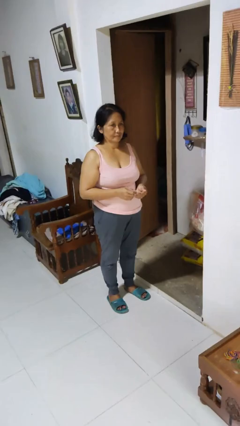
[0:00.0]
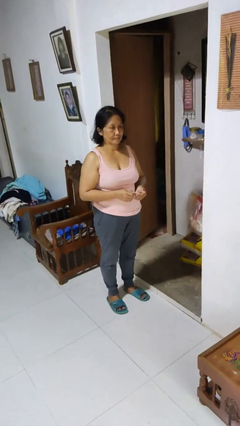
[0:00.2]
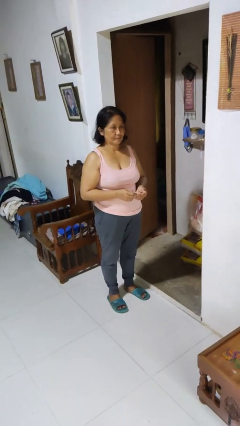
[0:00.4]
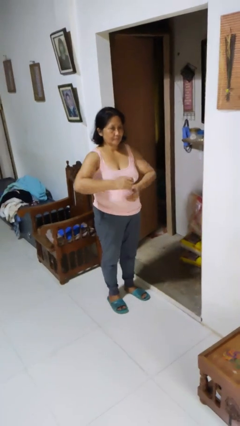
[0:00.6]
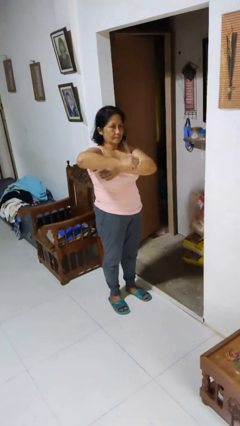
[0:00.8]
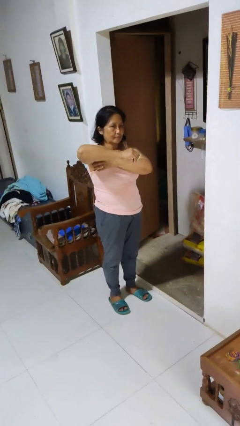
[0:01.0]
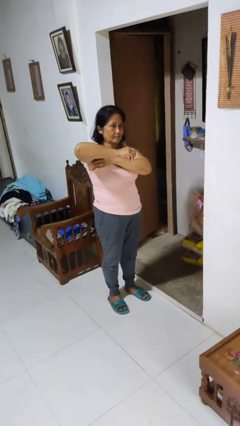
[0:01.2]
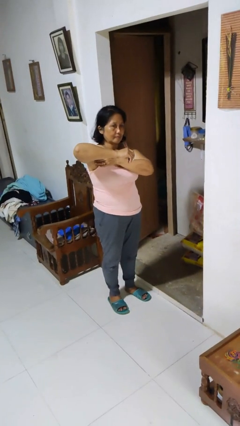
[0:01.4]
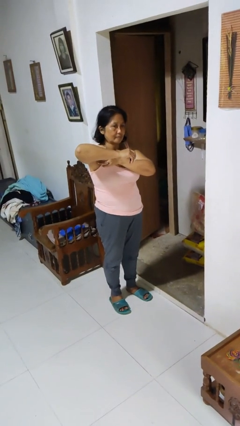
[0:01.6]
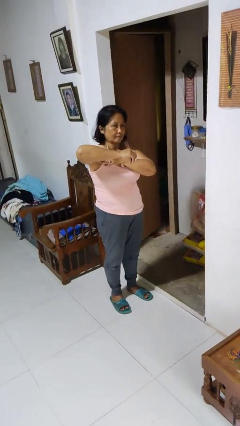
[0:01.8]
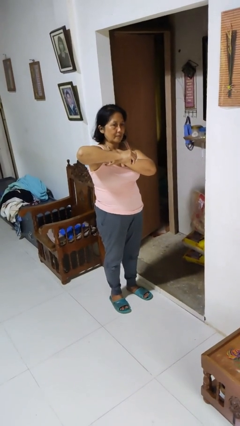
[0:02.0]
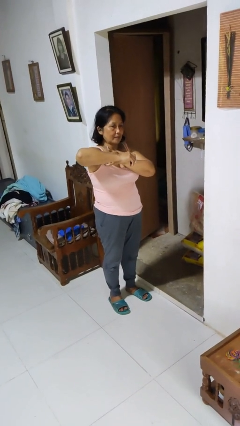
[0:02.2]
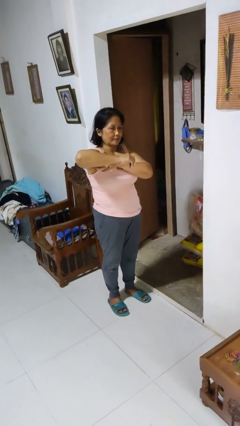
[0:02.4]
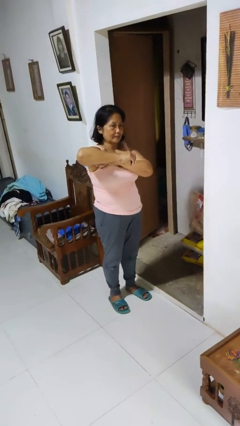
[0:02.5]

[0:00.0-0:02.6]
person applies deodorant

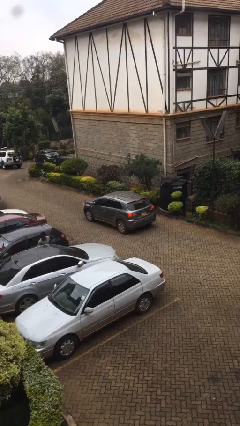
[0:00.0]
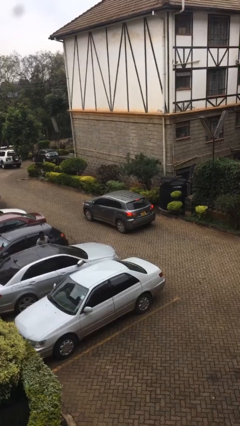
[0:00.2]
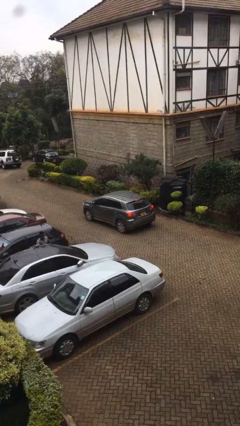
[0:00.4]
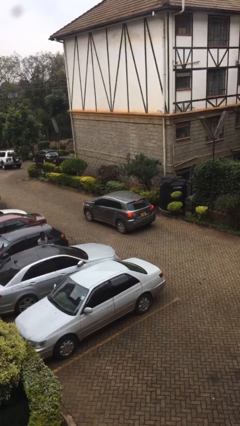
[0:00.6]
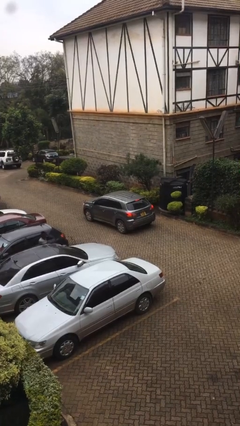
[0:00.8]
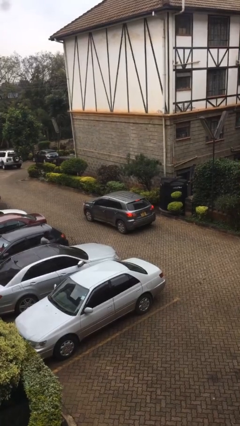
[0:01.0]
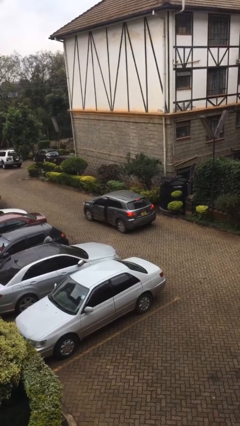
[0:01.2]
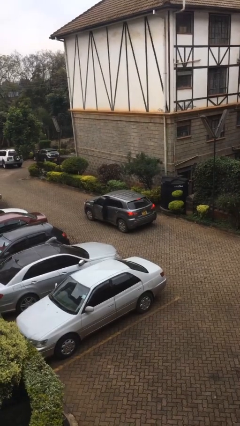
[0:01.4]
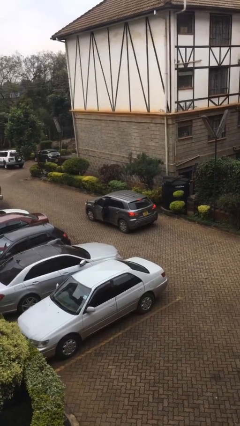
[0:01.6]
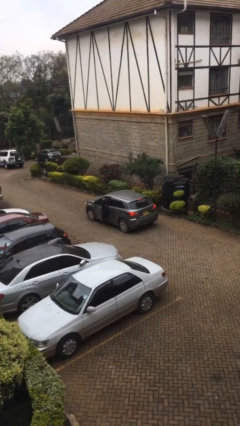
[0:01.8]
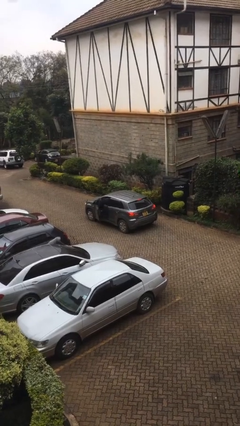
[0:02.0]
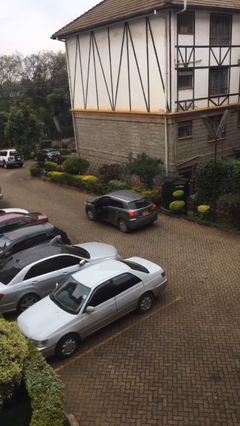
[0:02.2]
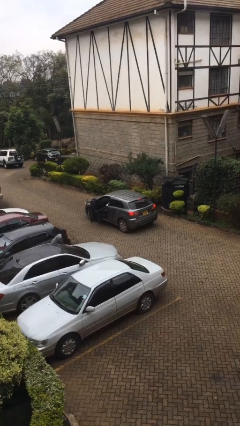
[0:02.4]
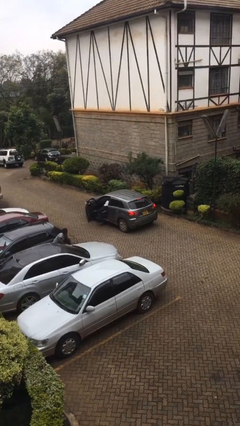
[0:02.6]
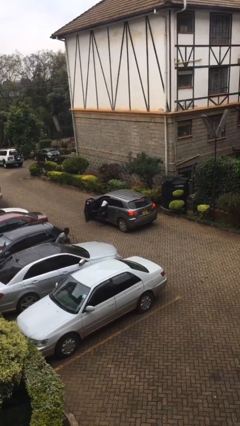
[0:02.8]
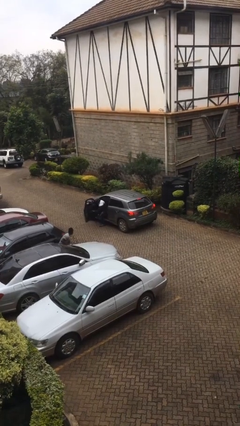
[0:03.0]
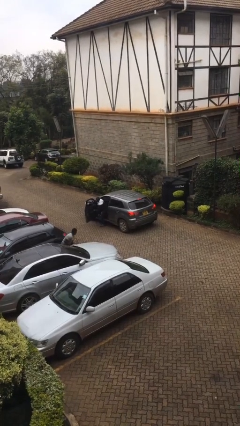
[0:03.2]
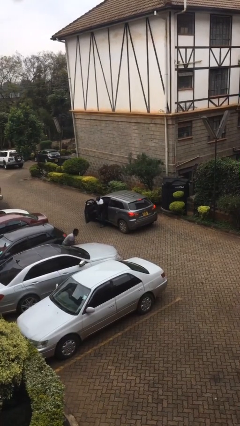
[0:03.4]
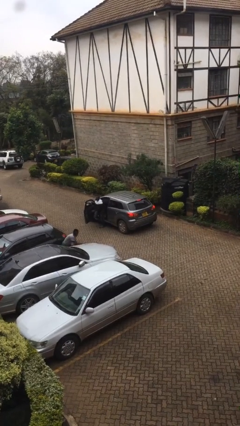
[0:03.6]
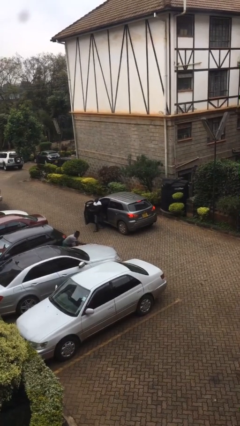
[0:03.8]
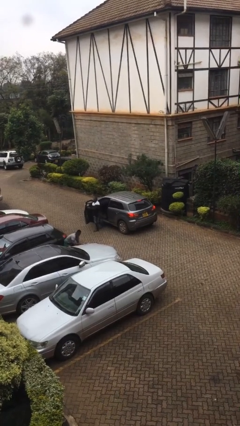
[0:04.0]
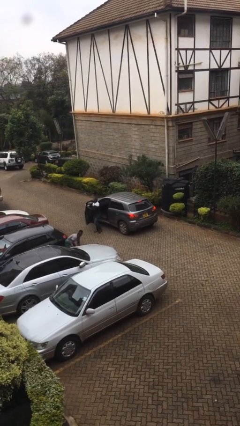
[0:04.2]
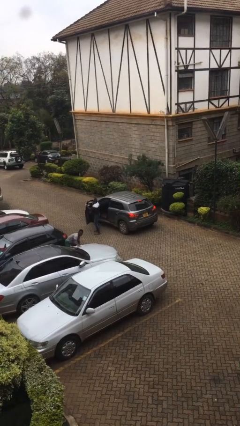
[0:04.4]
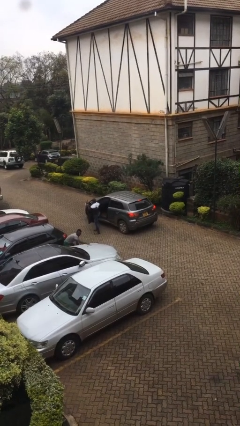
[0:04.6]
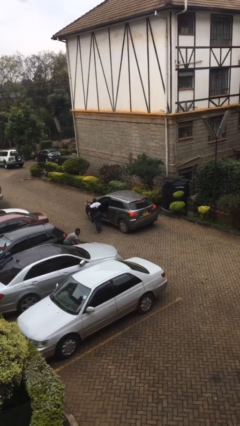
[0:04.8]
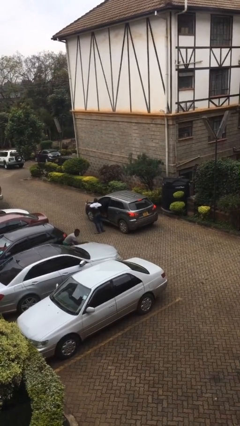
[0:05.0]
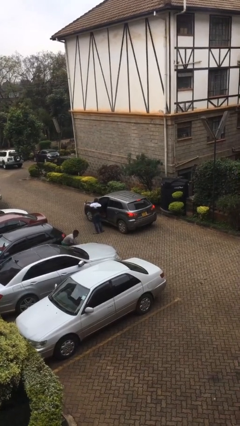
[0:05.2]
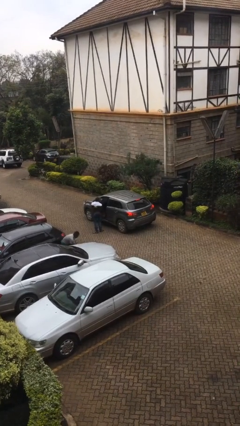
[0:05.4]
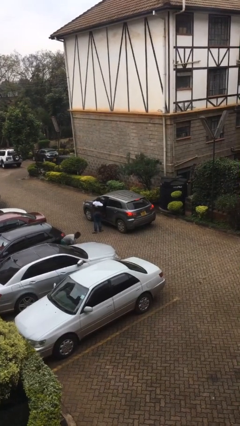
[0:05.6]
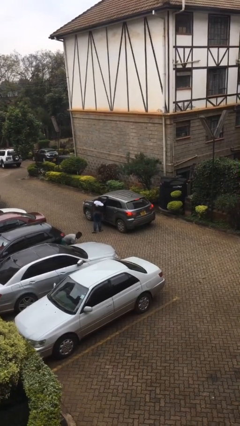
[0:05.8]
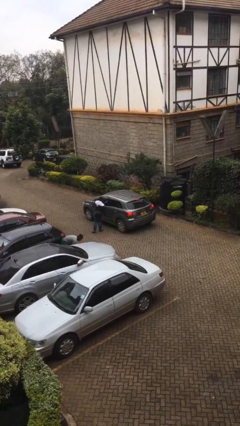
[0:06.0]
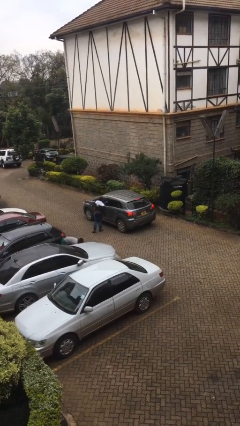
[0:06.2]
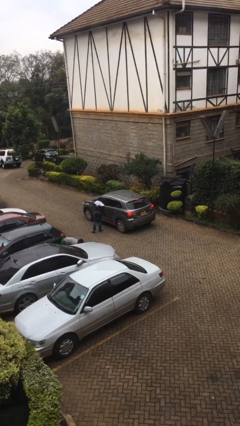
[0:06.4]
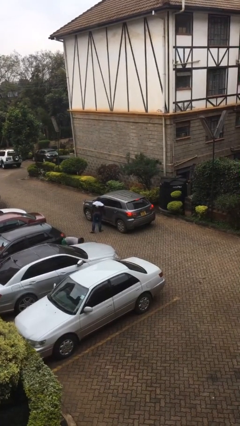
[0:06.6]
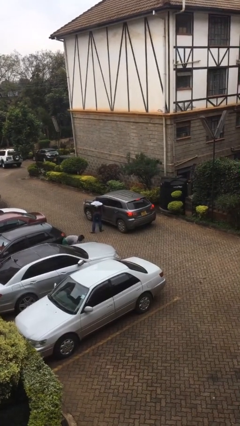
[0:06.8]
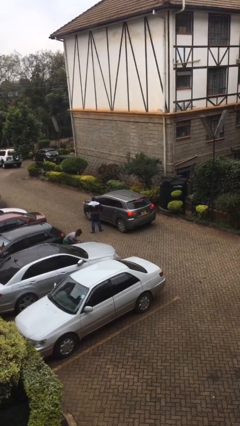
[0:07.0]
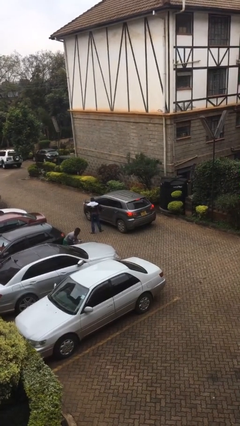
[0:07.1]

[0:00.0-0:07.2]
car drops off person

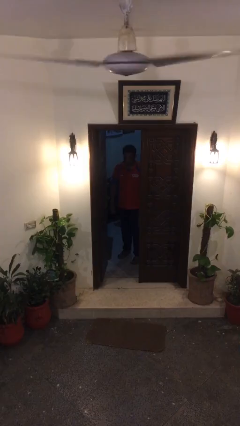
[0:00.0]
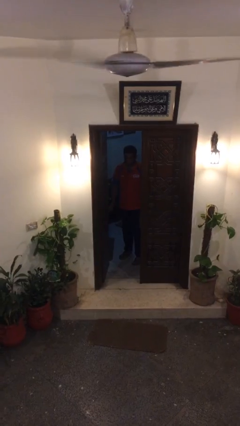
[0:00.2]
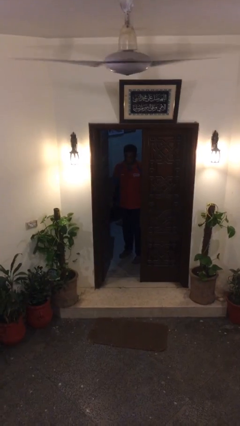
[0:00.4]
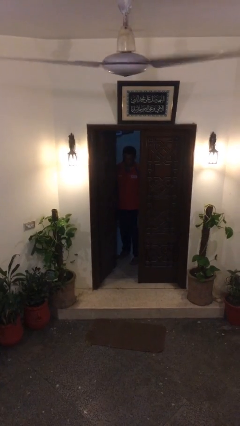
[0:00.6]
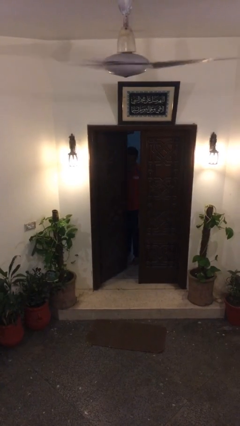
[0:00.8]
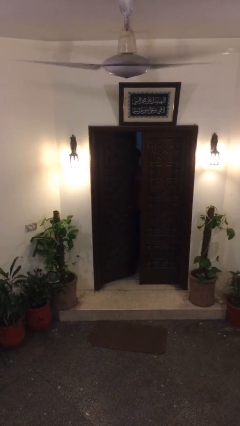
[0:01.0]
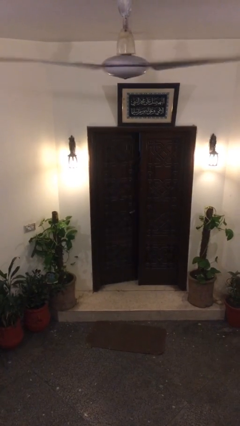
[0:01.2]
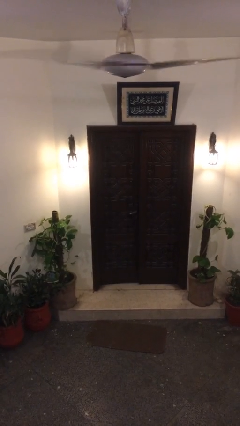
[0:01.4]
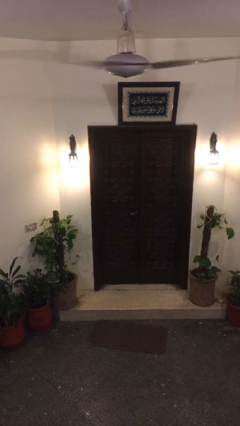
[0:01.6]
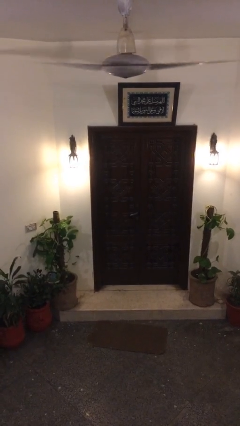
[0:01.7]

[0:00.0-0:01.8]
person closes facility door

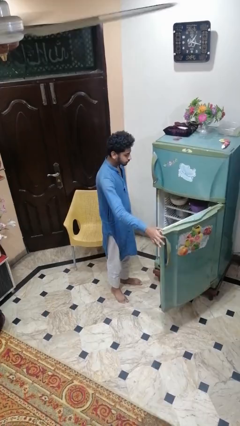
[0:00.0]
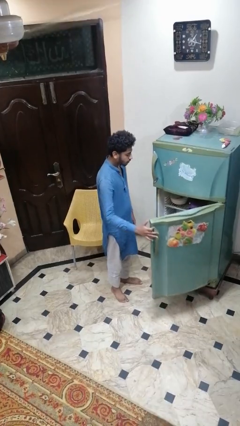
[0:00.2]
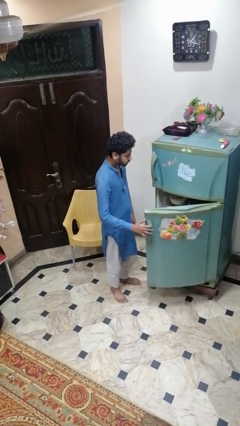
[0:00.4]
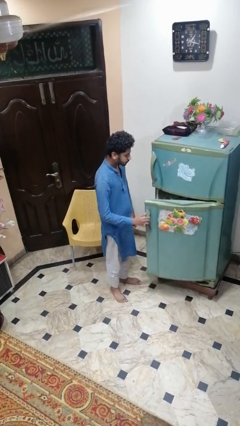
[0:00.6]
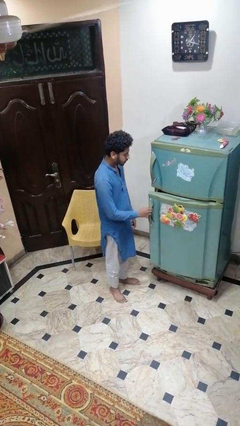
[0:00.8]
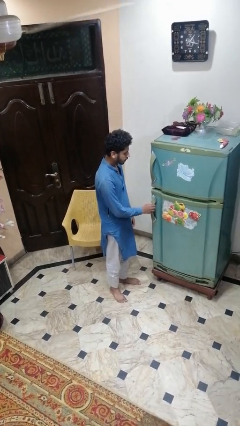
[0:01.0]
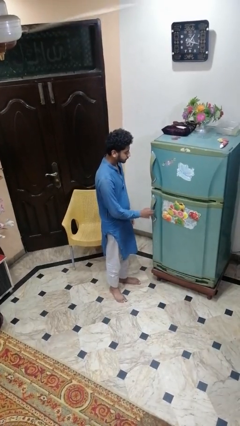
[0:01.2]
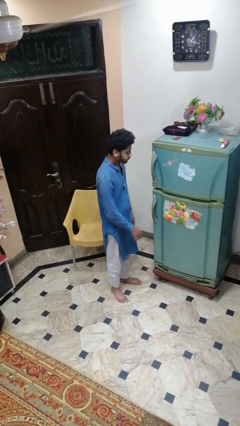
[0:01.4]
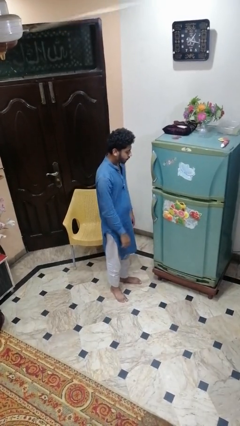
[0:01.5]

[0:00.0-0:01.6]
person closes refrigerator

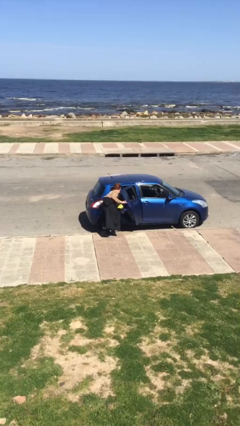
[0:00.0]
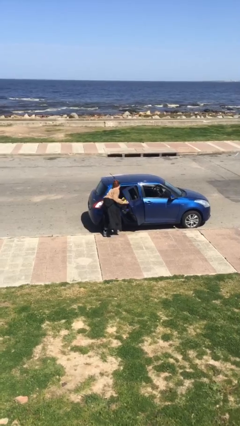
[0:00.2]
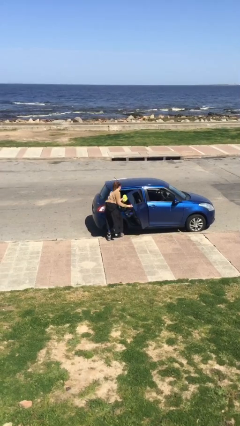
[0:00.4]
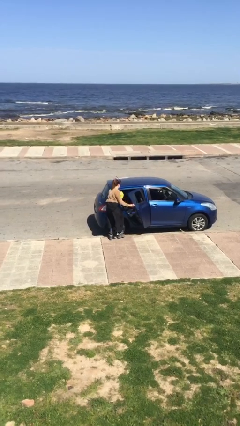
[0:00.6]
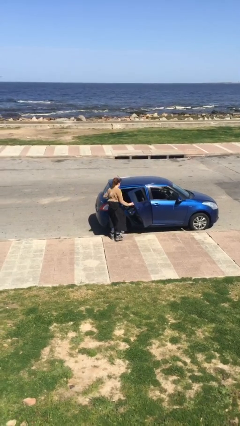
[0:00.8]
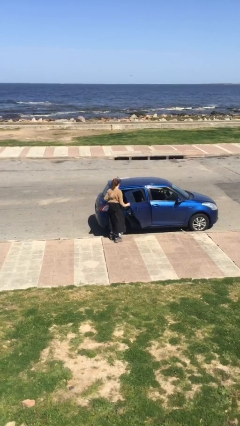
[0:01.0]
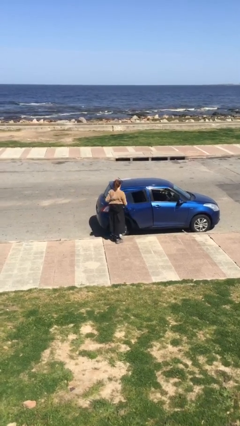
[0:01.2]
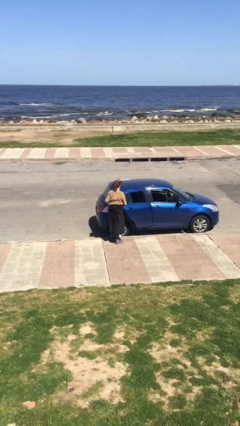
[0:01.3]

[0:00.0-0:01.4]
person unloads car

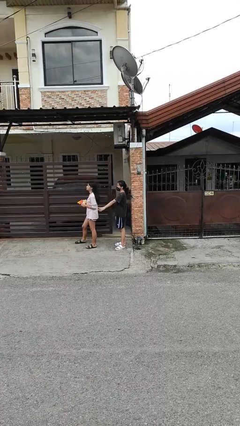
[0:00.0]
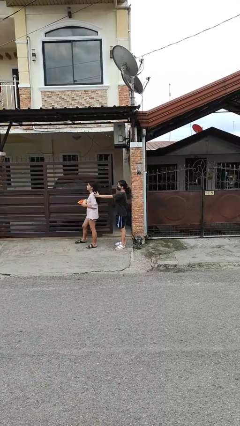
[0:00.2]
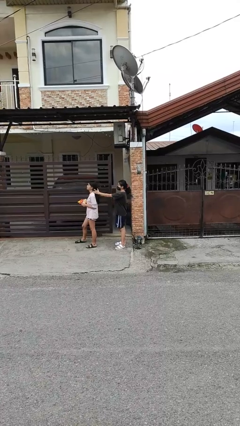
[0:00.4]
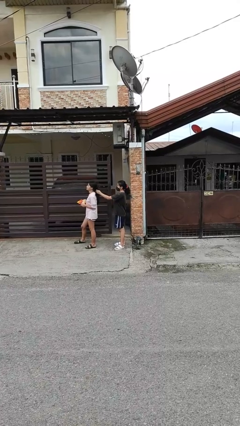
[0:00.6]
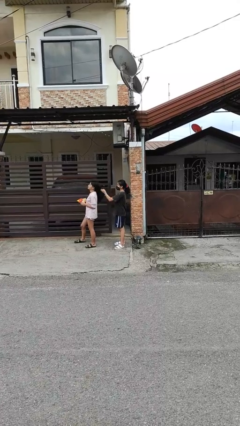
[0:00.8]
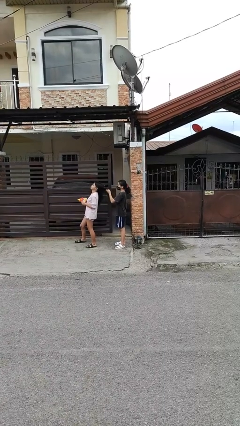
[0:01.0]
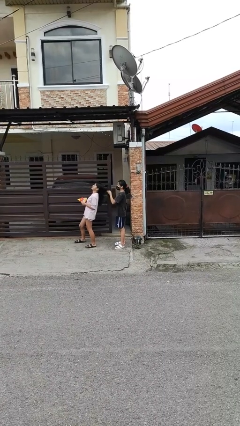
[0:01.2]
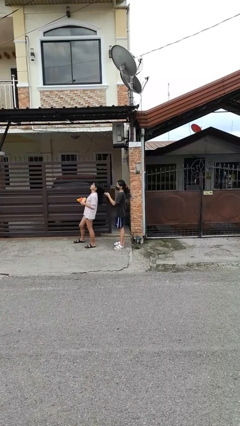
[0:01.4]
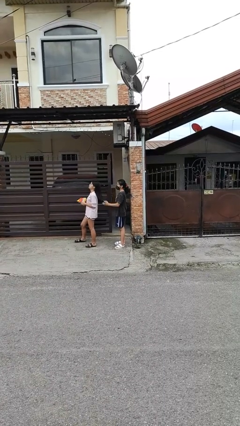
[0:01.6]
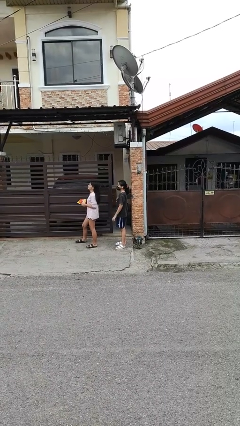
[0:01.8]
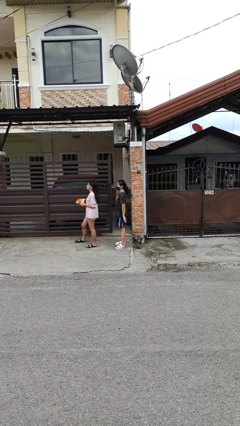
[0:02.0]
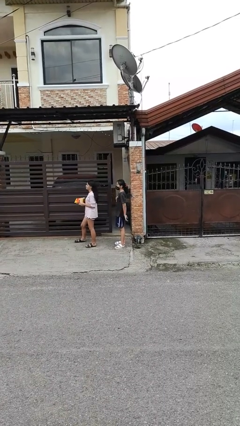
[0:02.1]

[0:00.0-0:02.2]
person grabs person by hair

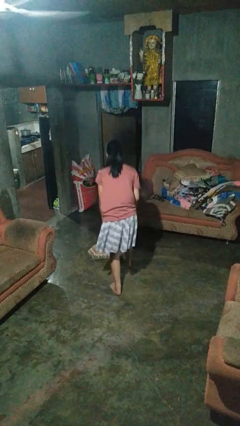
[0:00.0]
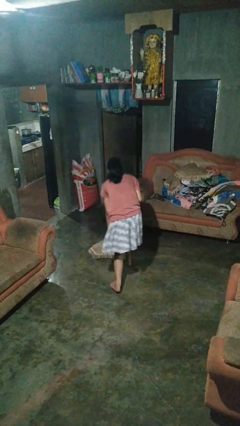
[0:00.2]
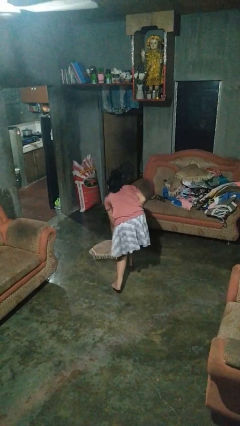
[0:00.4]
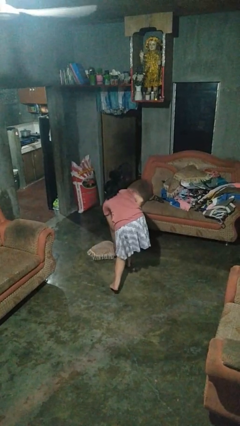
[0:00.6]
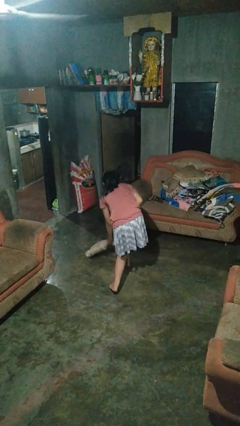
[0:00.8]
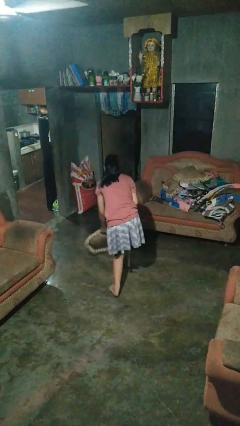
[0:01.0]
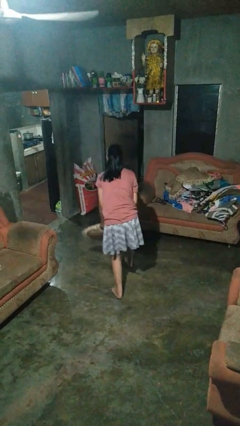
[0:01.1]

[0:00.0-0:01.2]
person picks up object from floor
